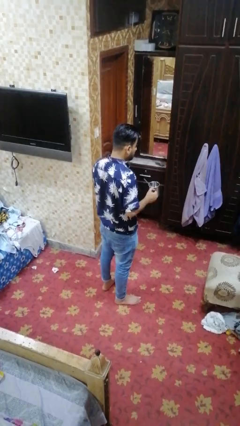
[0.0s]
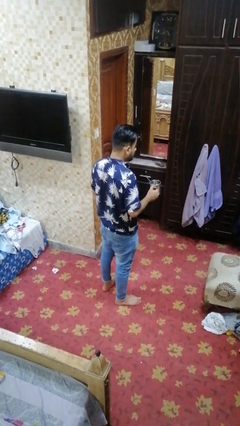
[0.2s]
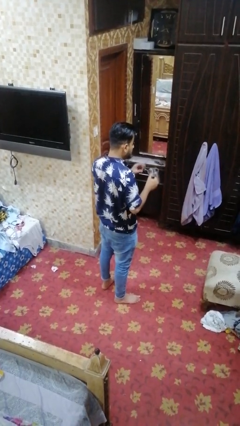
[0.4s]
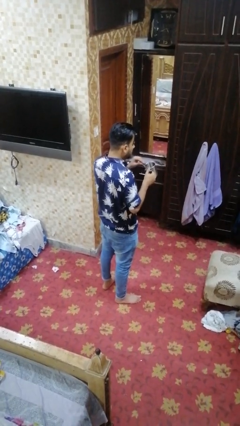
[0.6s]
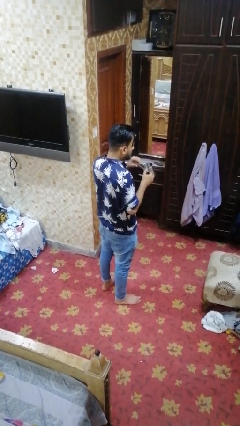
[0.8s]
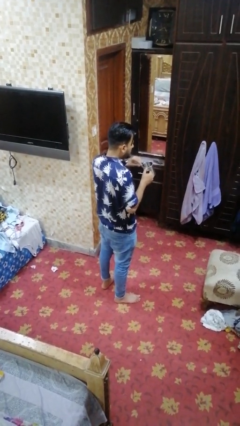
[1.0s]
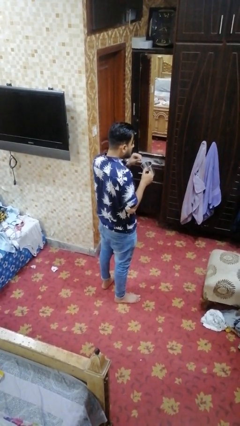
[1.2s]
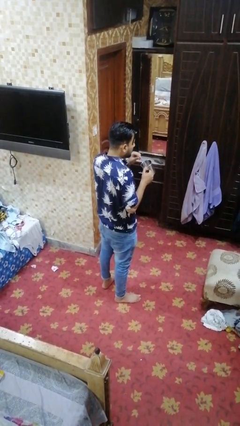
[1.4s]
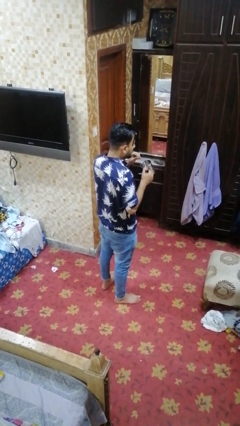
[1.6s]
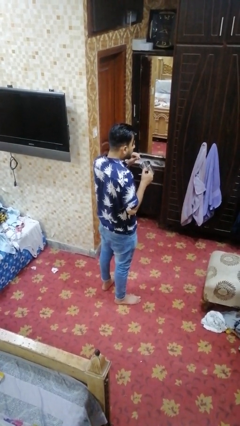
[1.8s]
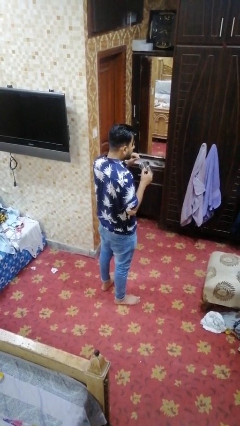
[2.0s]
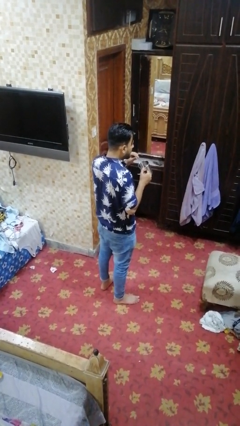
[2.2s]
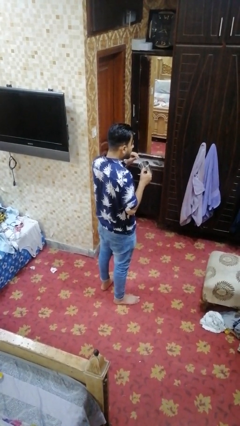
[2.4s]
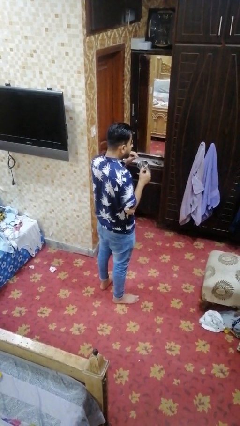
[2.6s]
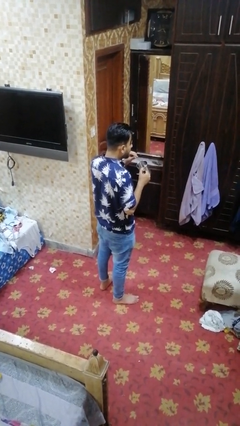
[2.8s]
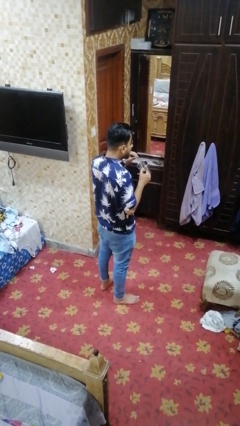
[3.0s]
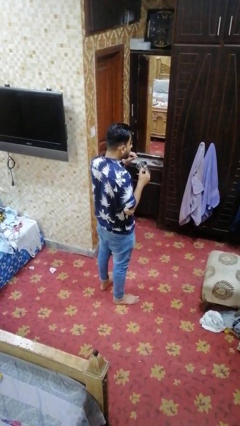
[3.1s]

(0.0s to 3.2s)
person drinks from straw

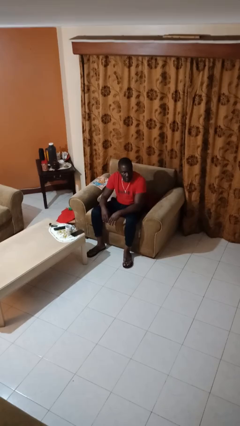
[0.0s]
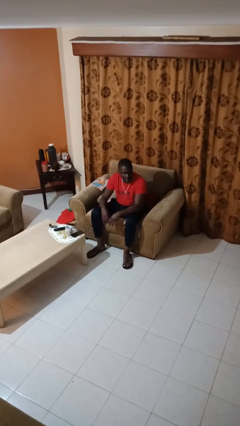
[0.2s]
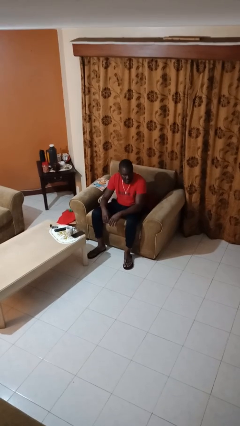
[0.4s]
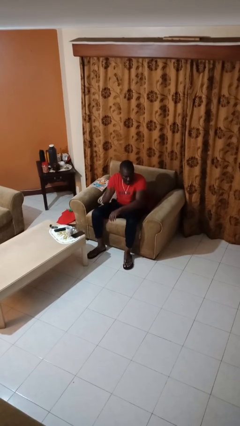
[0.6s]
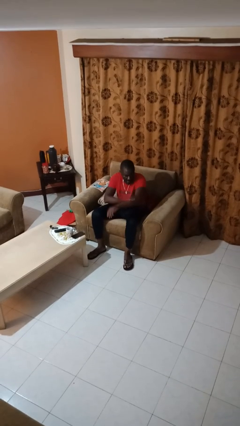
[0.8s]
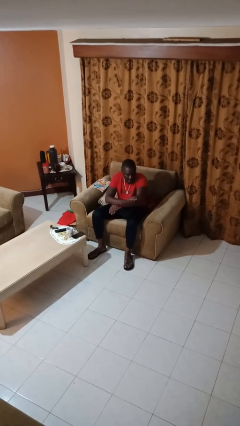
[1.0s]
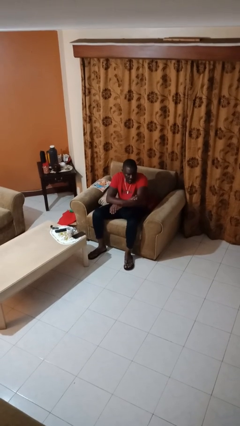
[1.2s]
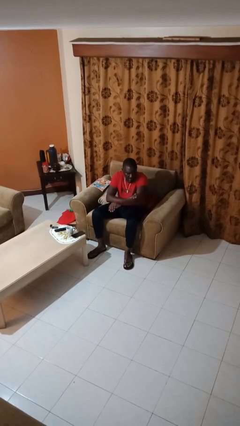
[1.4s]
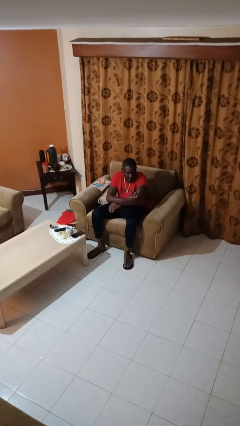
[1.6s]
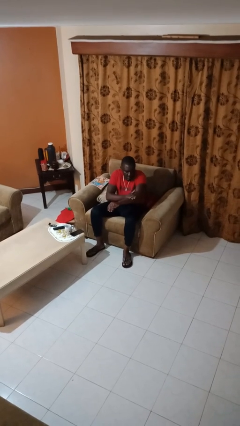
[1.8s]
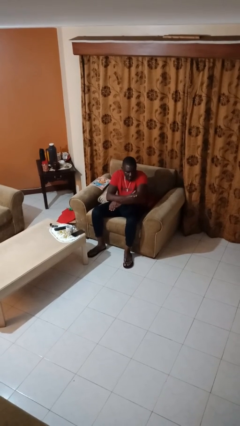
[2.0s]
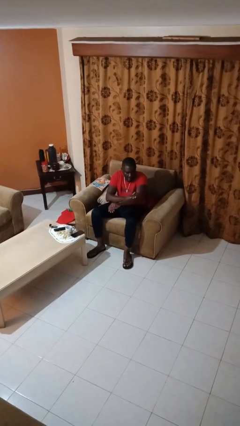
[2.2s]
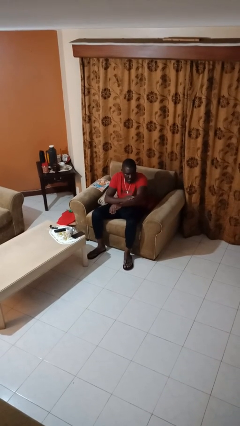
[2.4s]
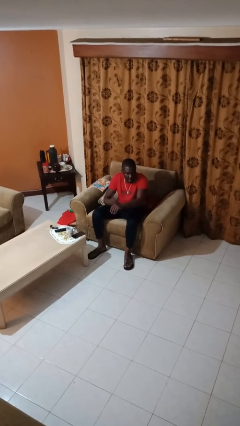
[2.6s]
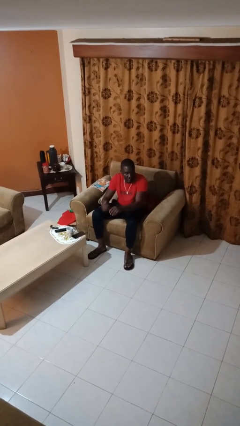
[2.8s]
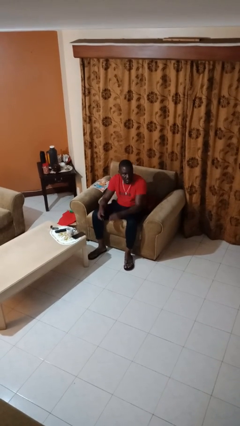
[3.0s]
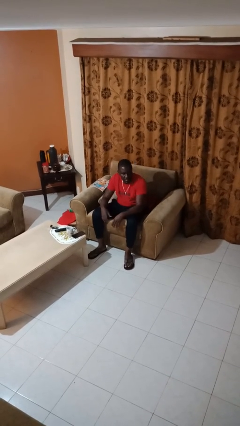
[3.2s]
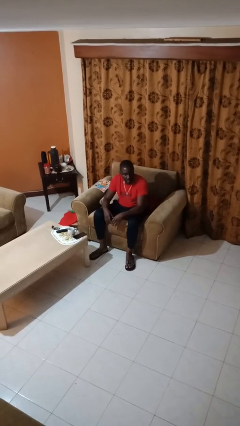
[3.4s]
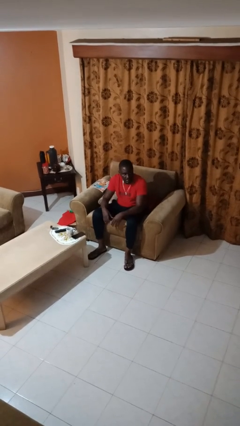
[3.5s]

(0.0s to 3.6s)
person swats bug

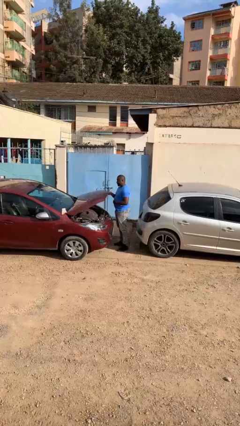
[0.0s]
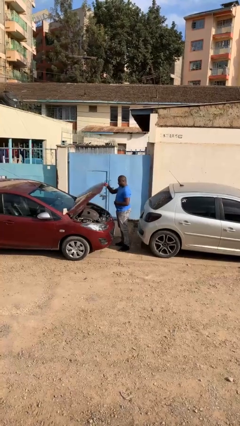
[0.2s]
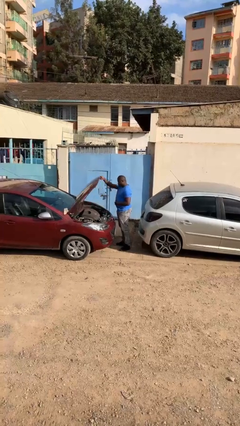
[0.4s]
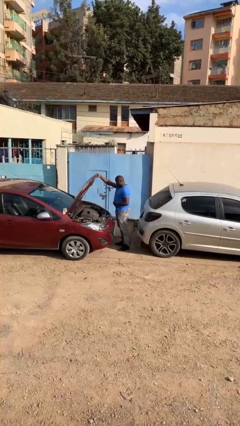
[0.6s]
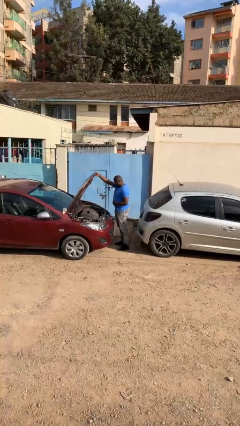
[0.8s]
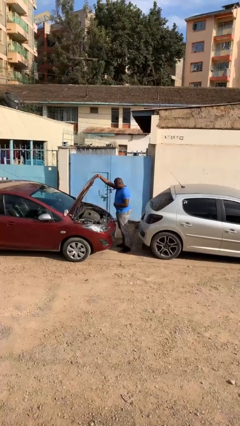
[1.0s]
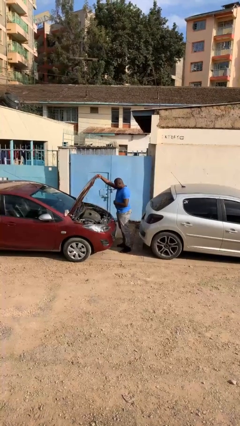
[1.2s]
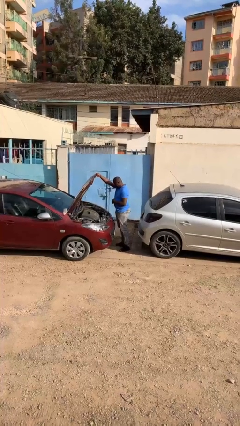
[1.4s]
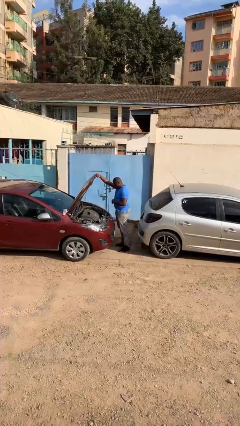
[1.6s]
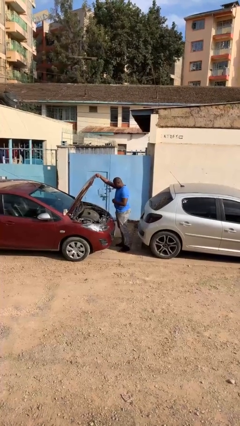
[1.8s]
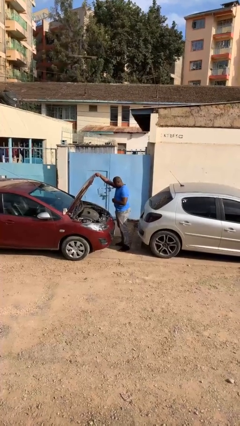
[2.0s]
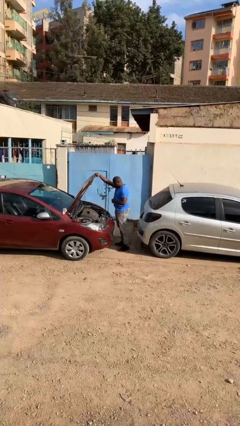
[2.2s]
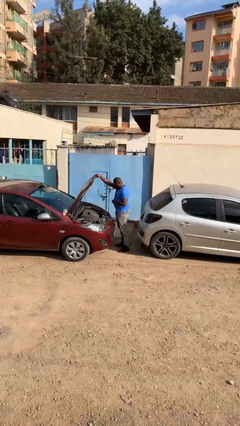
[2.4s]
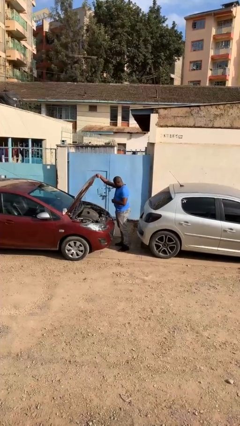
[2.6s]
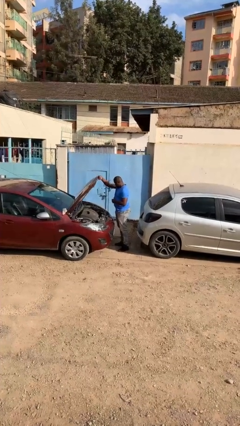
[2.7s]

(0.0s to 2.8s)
person opens car hood

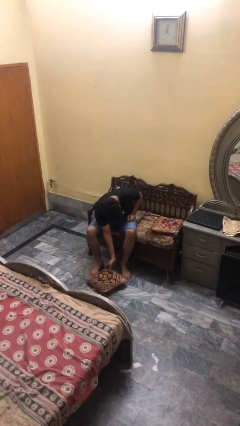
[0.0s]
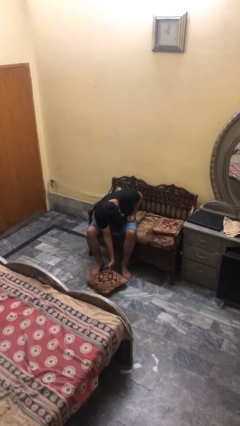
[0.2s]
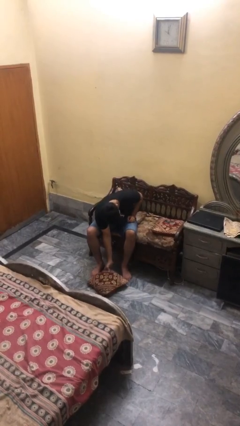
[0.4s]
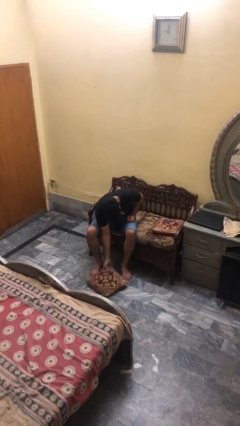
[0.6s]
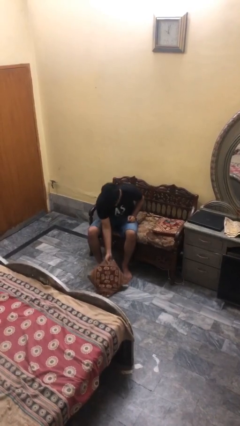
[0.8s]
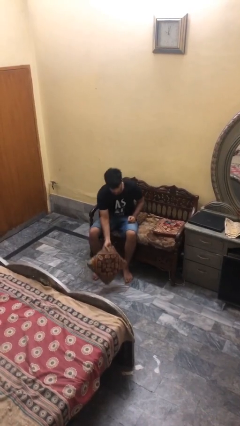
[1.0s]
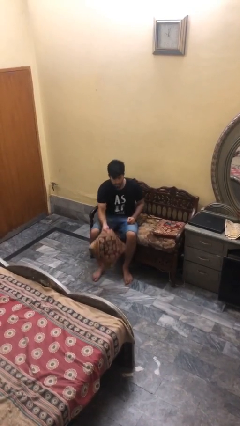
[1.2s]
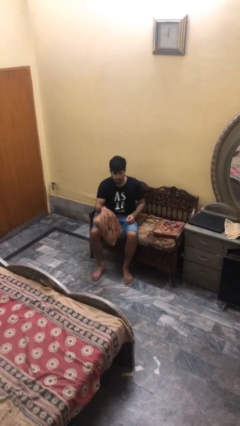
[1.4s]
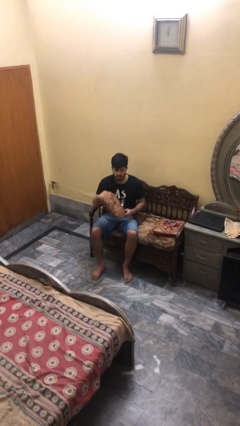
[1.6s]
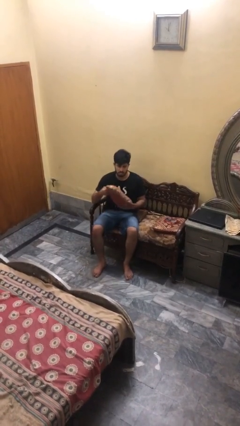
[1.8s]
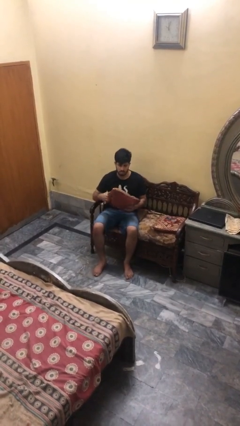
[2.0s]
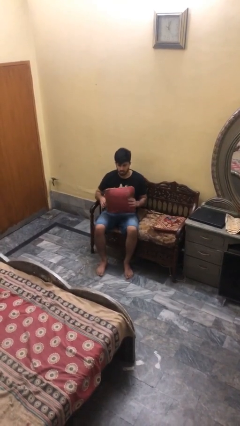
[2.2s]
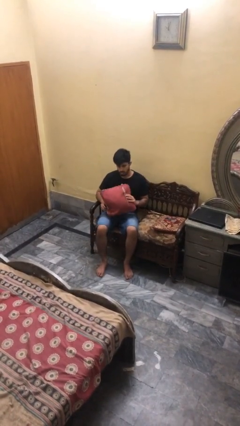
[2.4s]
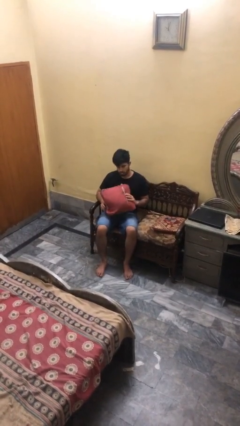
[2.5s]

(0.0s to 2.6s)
person picks up object from floor

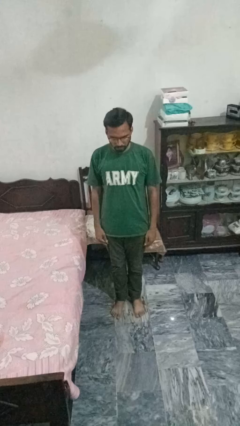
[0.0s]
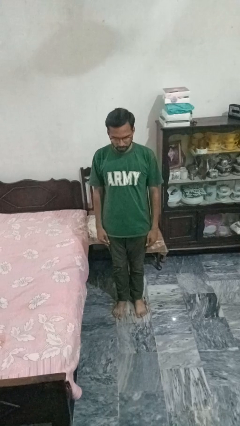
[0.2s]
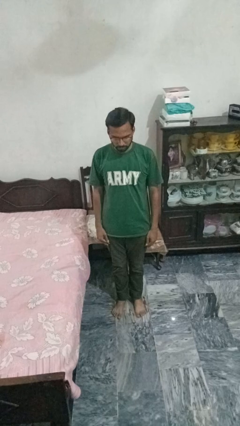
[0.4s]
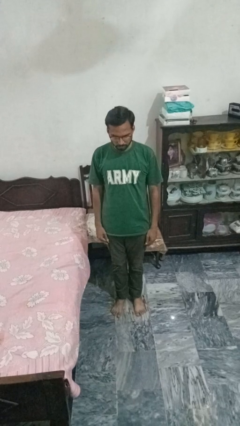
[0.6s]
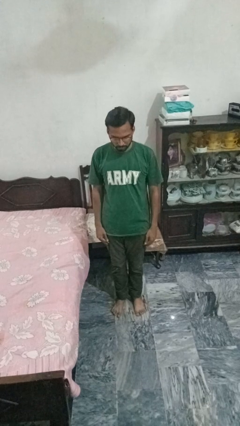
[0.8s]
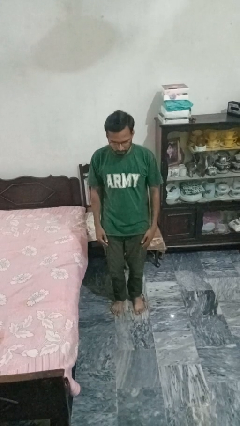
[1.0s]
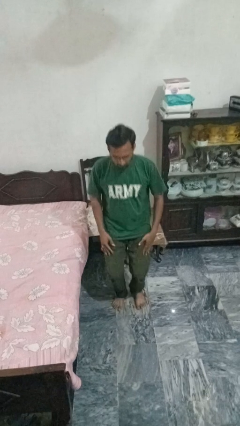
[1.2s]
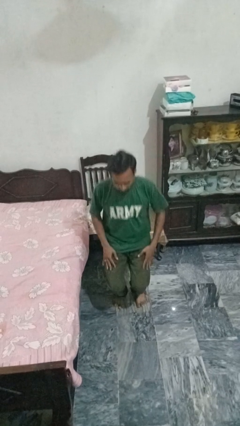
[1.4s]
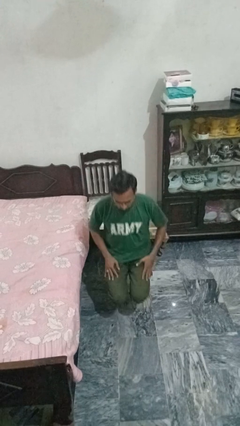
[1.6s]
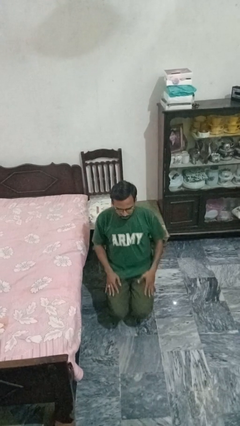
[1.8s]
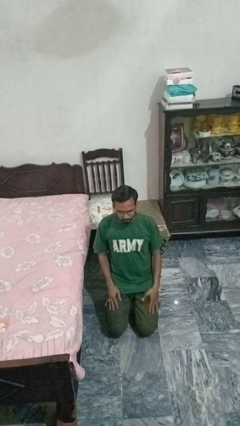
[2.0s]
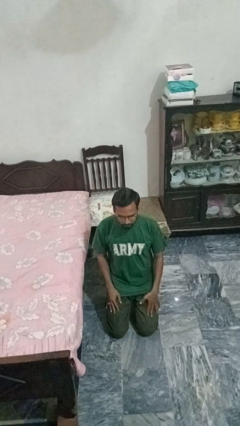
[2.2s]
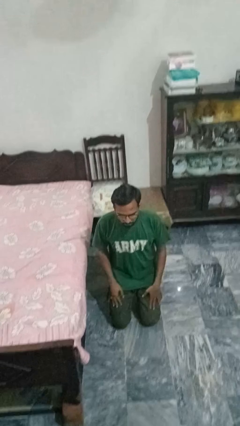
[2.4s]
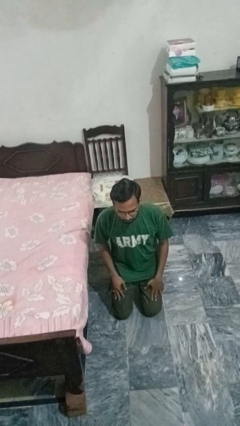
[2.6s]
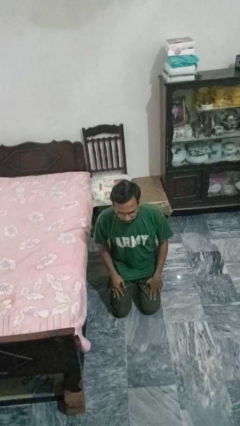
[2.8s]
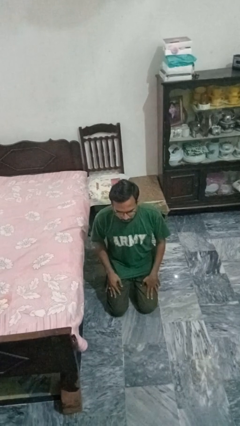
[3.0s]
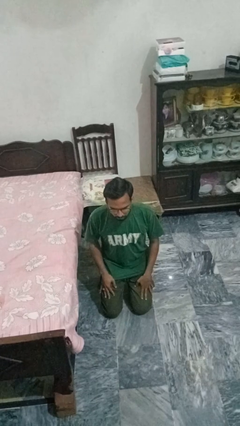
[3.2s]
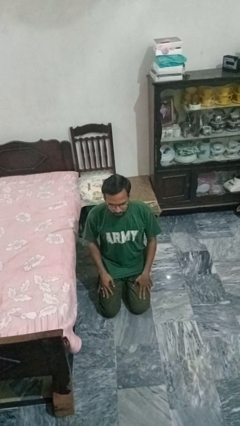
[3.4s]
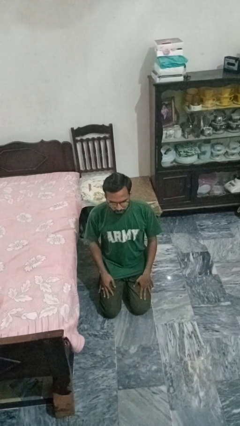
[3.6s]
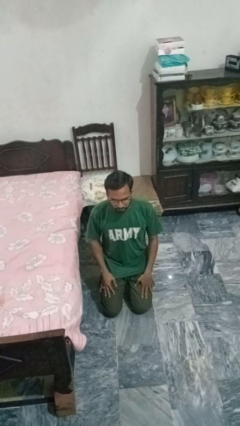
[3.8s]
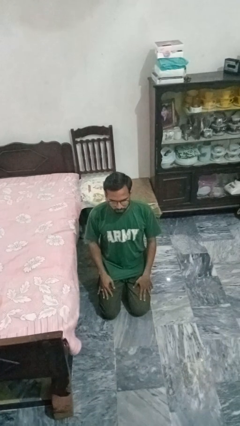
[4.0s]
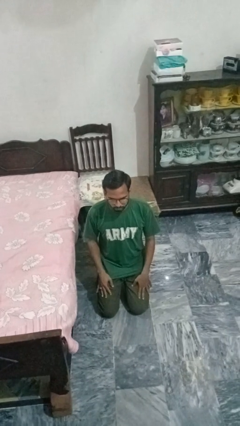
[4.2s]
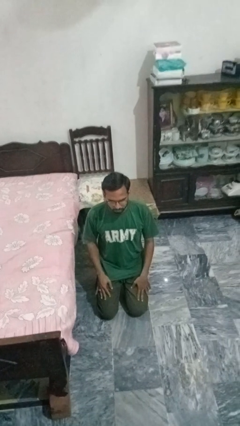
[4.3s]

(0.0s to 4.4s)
person kneels

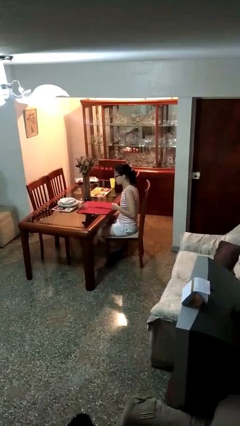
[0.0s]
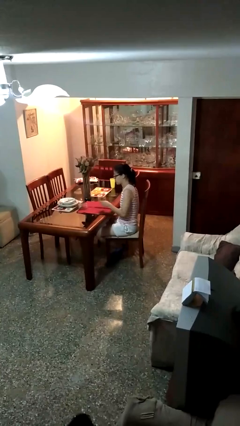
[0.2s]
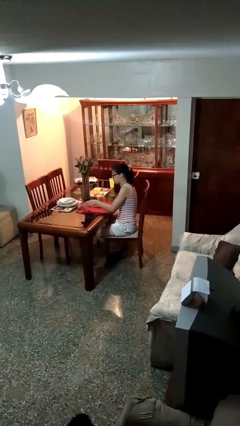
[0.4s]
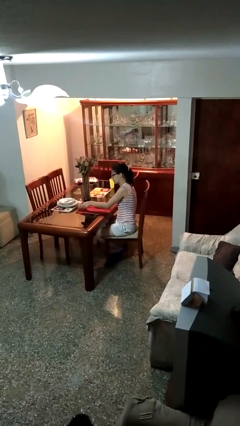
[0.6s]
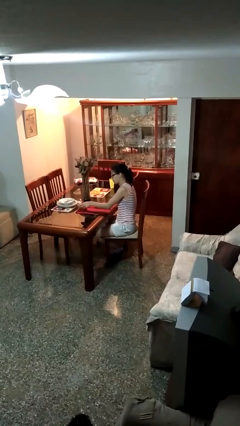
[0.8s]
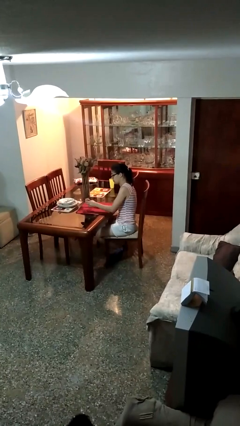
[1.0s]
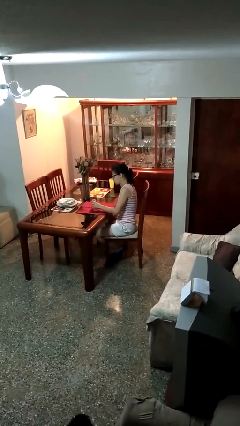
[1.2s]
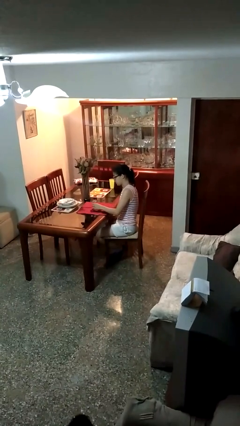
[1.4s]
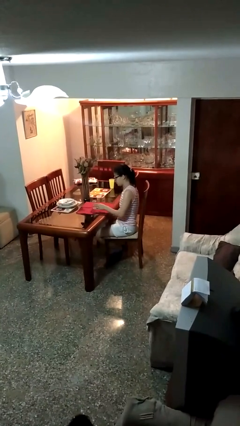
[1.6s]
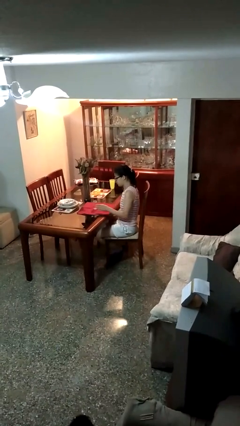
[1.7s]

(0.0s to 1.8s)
person sets upright glass
